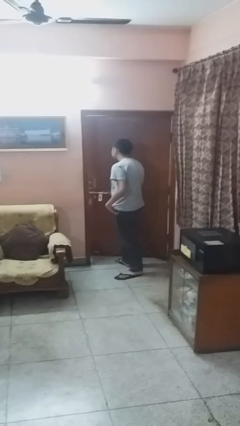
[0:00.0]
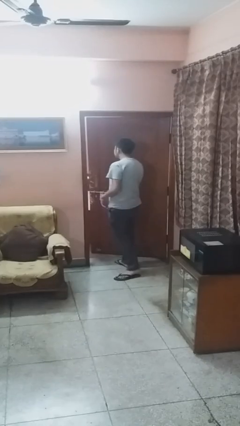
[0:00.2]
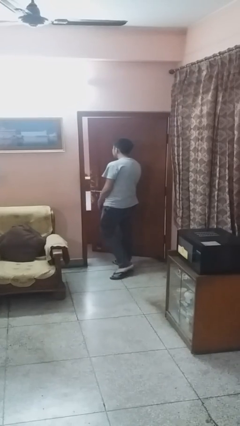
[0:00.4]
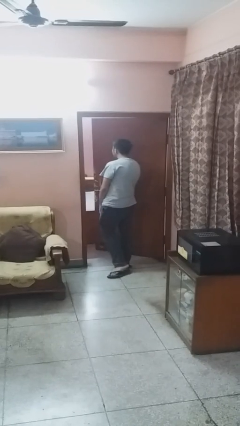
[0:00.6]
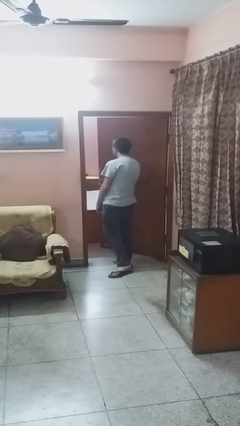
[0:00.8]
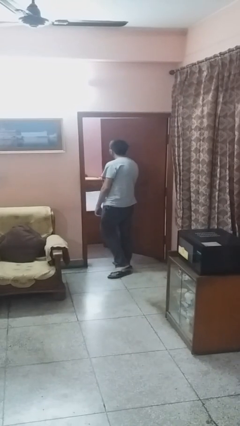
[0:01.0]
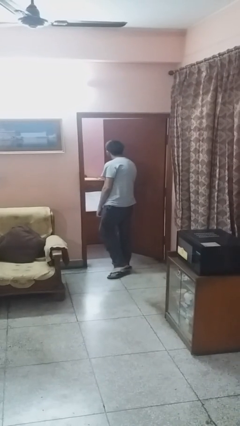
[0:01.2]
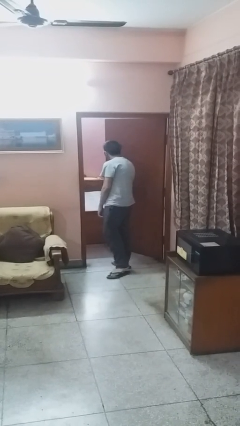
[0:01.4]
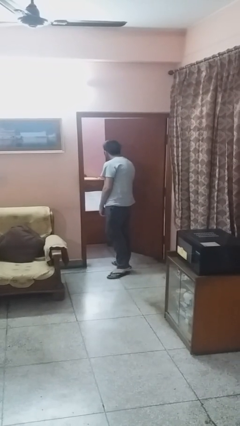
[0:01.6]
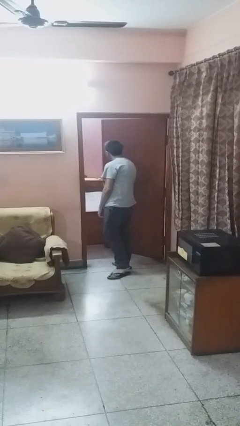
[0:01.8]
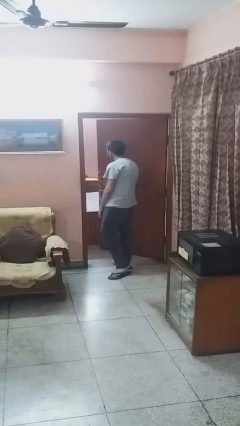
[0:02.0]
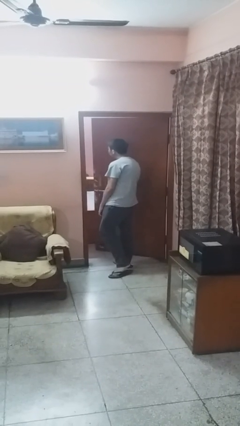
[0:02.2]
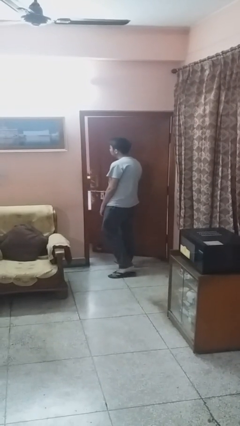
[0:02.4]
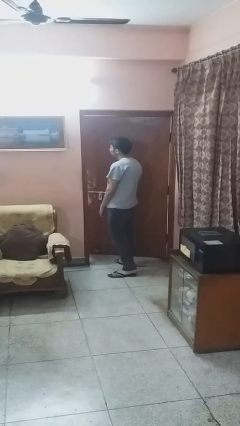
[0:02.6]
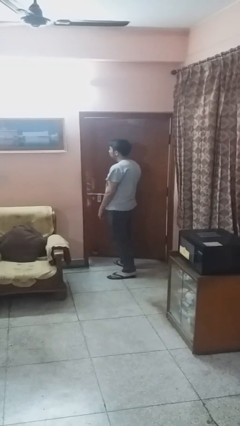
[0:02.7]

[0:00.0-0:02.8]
person opens facility door

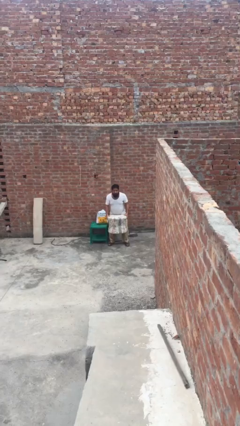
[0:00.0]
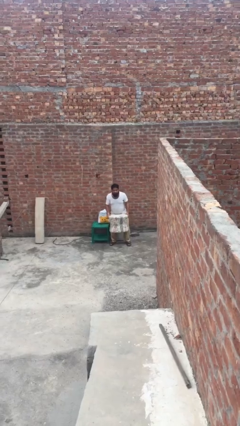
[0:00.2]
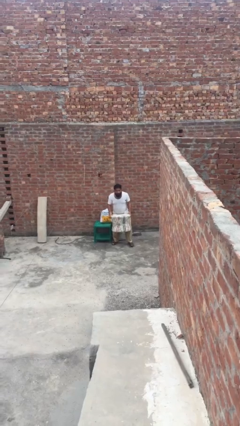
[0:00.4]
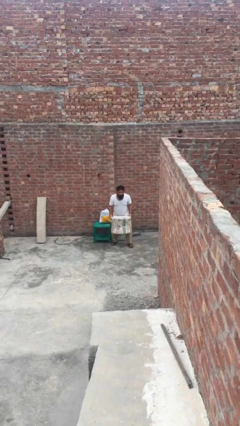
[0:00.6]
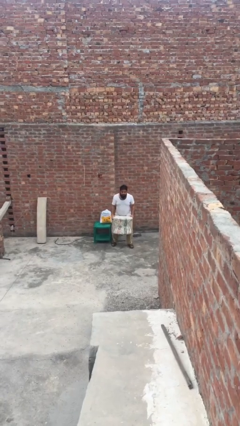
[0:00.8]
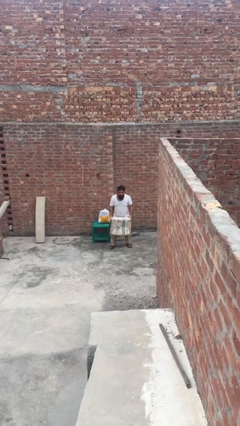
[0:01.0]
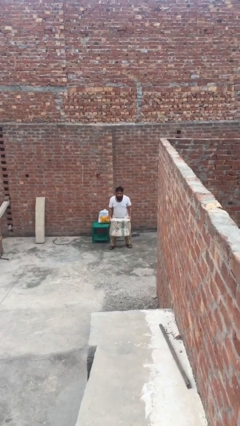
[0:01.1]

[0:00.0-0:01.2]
person picks up object from floor

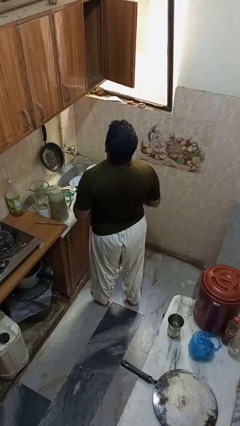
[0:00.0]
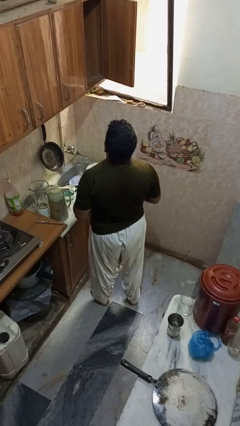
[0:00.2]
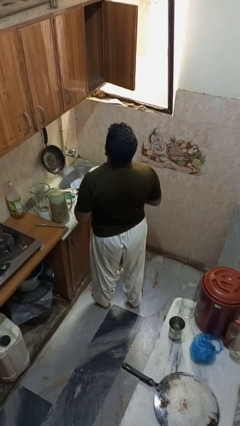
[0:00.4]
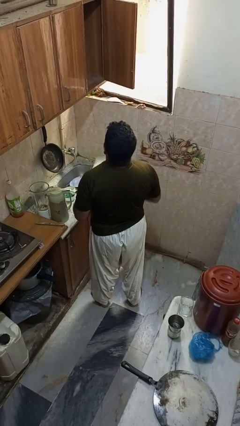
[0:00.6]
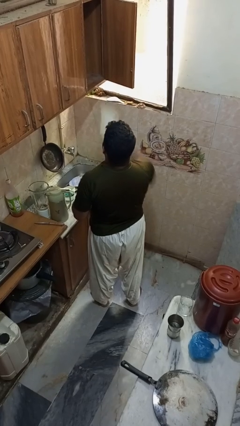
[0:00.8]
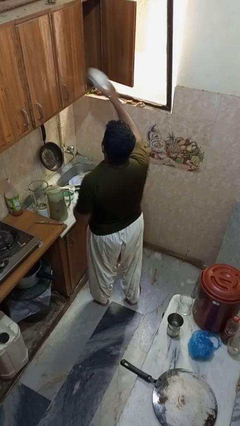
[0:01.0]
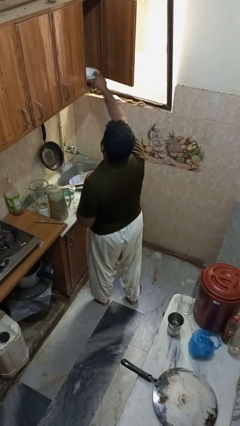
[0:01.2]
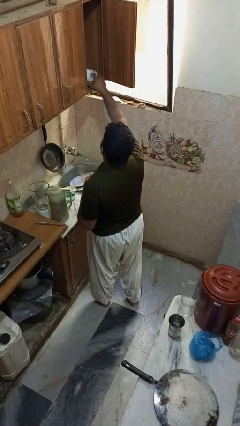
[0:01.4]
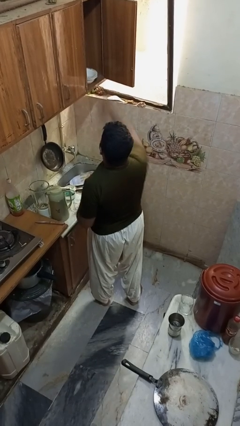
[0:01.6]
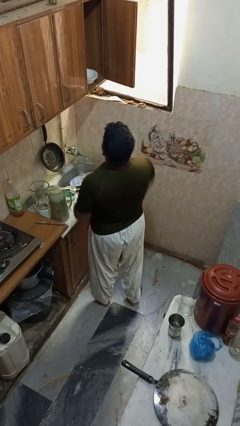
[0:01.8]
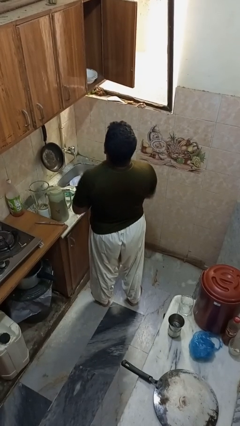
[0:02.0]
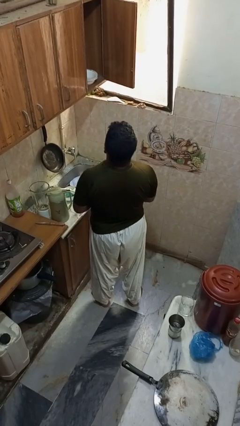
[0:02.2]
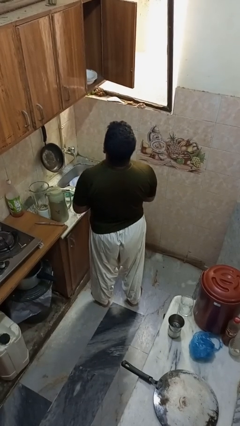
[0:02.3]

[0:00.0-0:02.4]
person puts object in cabinet

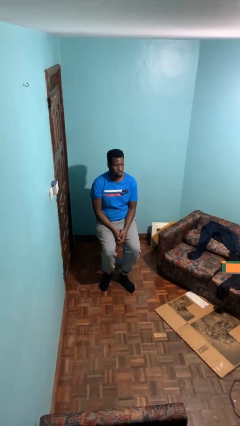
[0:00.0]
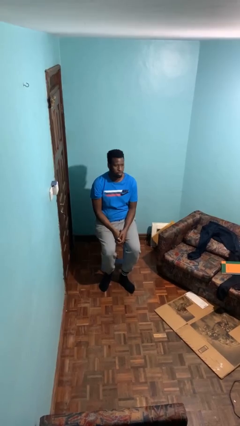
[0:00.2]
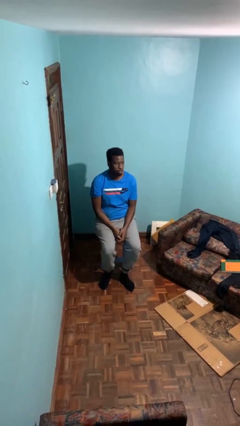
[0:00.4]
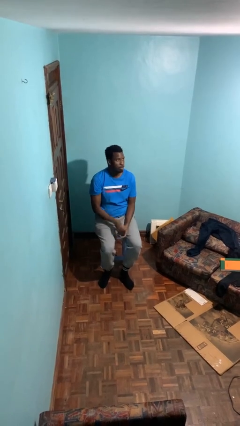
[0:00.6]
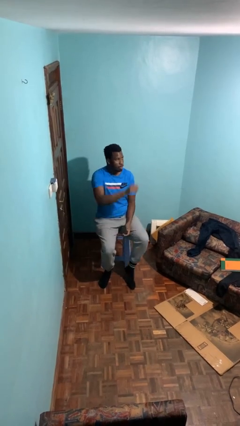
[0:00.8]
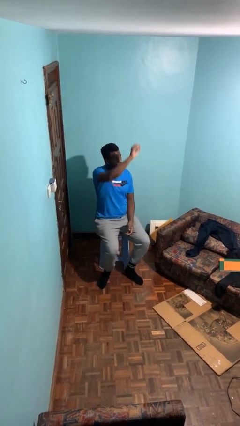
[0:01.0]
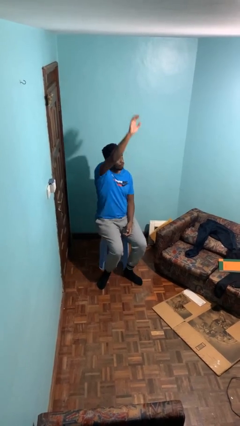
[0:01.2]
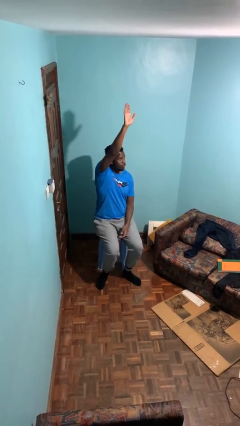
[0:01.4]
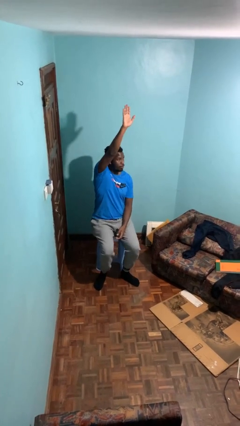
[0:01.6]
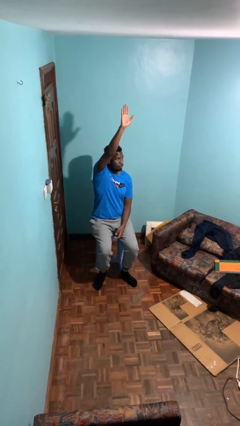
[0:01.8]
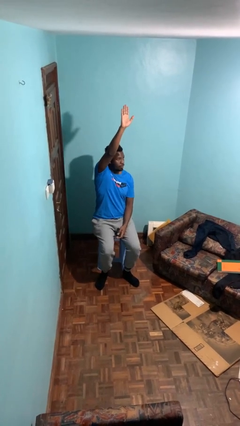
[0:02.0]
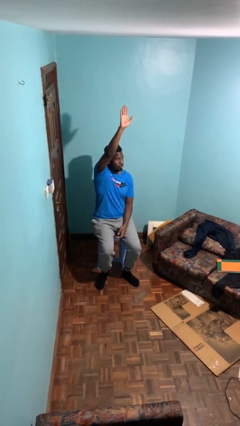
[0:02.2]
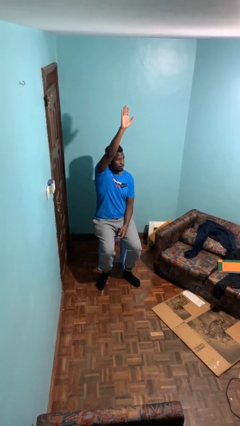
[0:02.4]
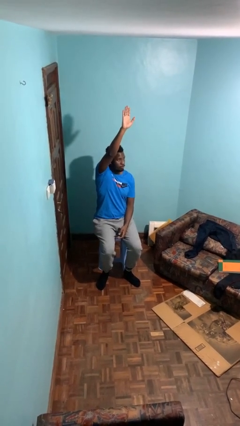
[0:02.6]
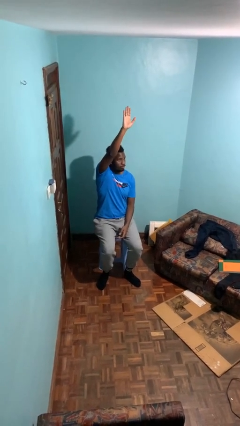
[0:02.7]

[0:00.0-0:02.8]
person gestures raise hand

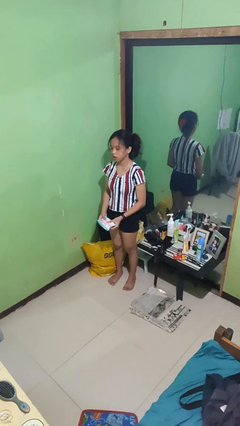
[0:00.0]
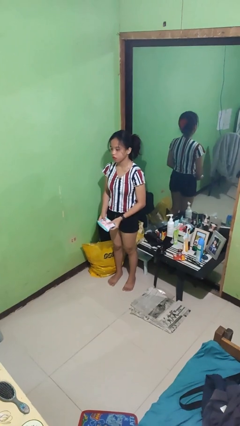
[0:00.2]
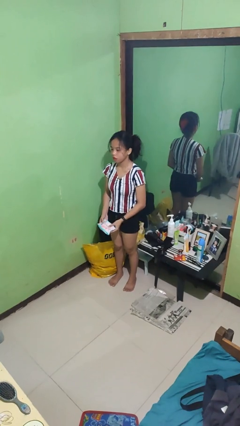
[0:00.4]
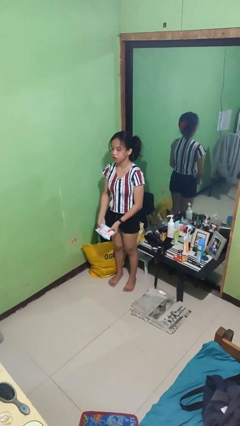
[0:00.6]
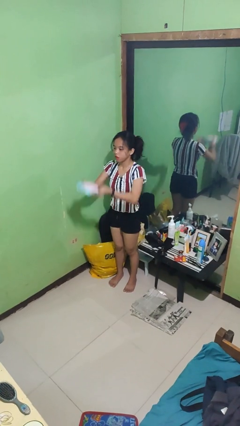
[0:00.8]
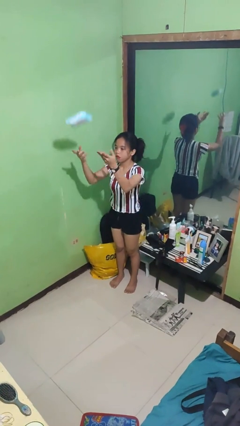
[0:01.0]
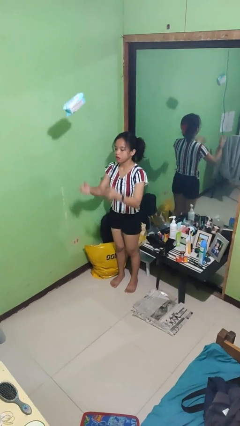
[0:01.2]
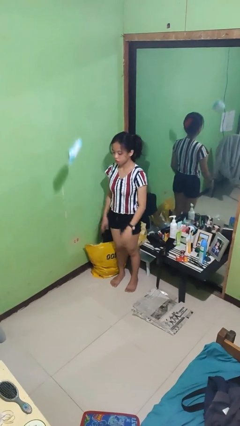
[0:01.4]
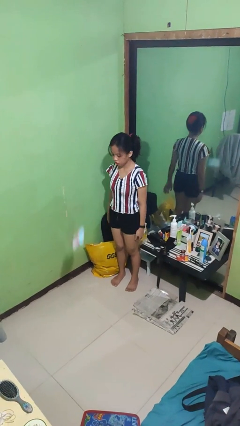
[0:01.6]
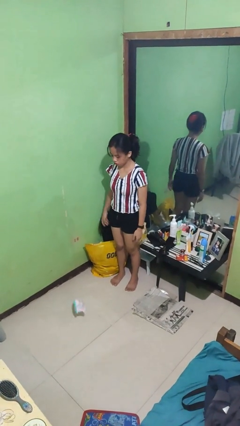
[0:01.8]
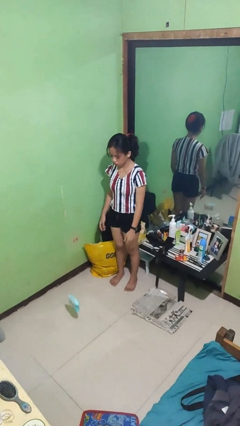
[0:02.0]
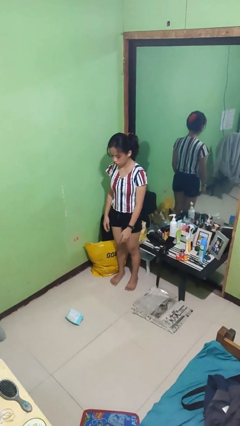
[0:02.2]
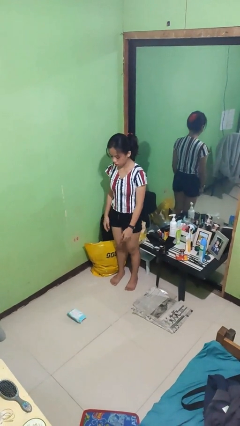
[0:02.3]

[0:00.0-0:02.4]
person throws object into air

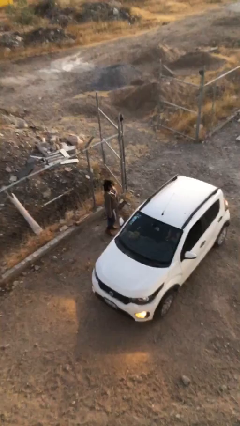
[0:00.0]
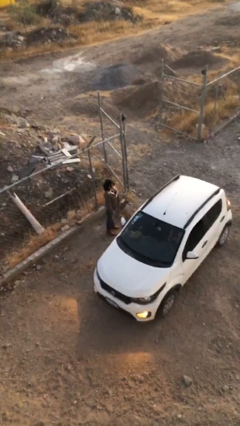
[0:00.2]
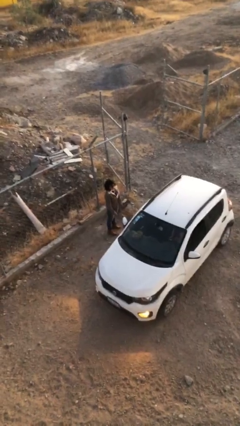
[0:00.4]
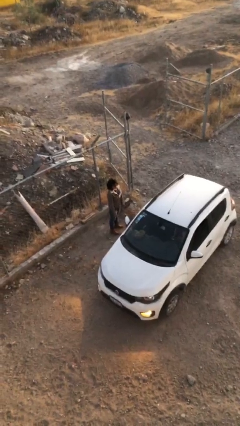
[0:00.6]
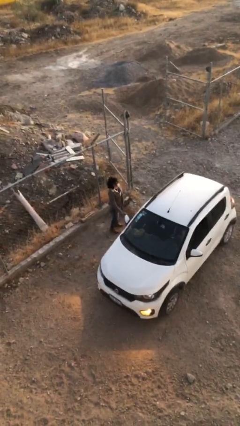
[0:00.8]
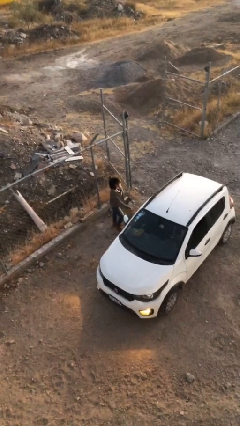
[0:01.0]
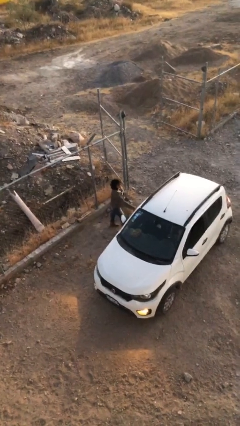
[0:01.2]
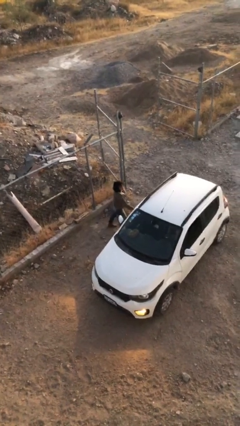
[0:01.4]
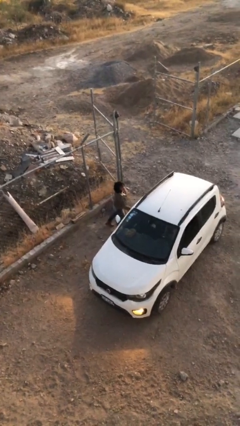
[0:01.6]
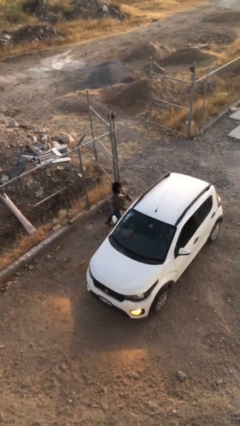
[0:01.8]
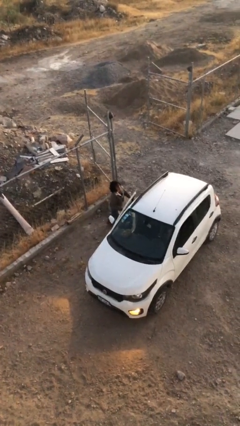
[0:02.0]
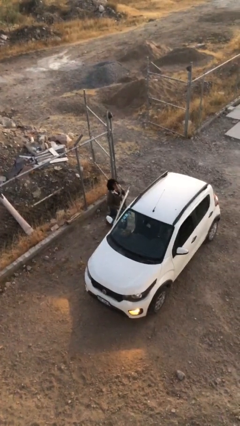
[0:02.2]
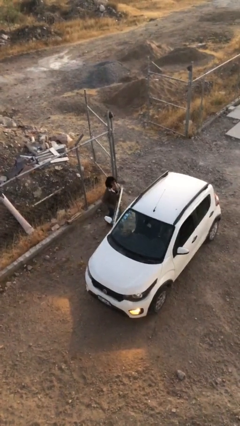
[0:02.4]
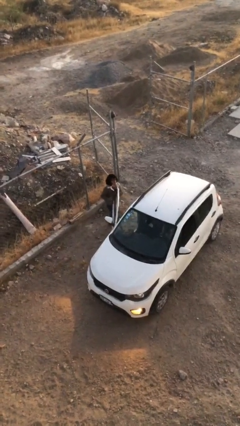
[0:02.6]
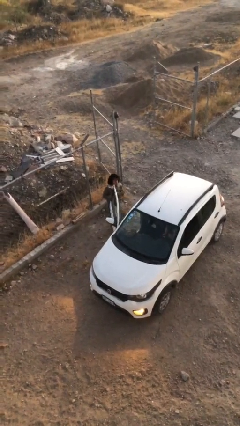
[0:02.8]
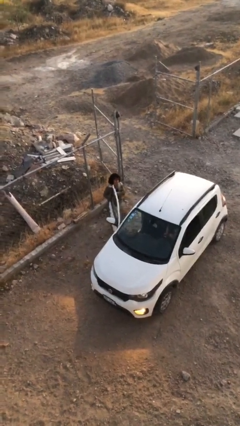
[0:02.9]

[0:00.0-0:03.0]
person opens car door

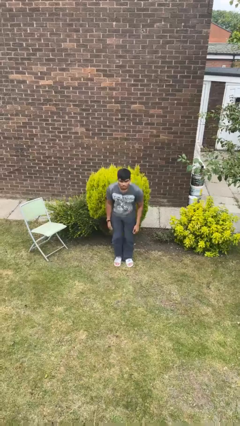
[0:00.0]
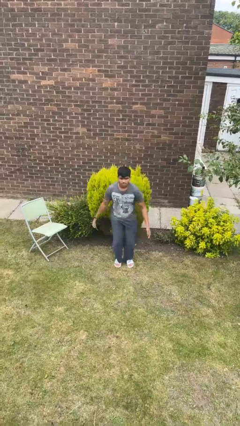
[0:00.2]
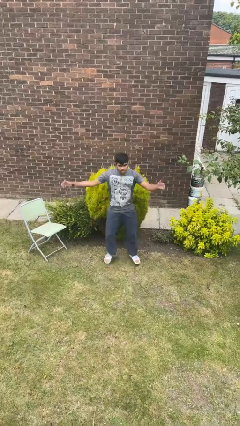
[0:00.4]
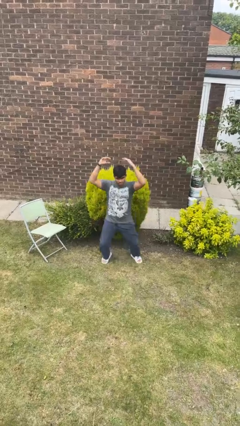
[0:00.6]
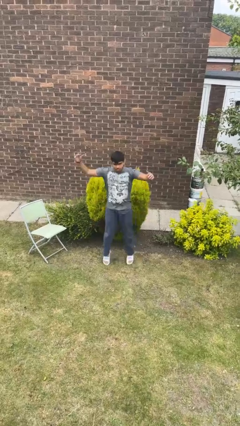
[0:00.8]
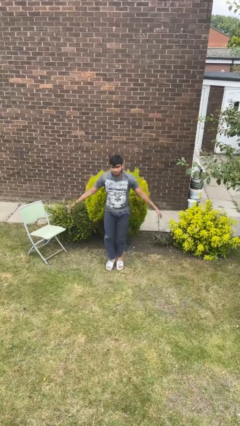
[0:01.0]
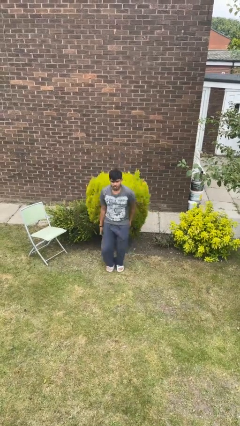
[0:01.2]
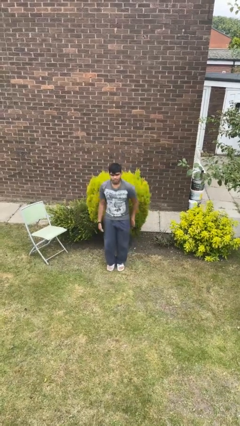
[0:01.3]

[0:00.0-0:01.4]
person exercises with jumping jacks

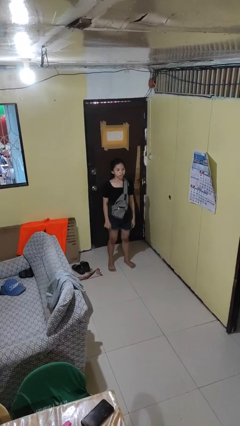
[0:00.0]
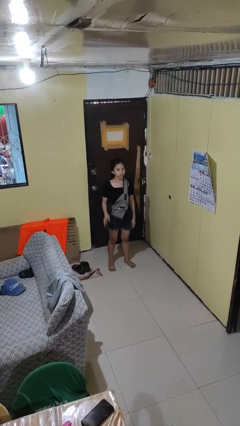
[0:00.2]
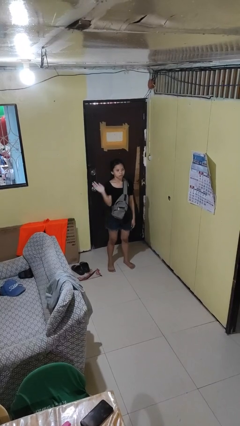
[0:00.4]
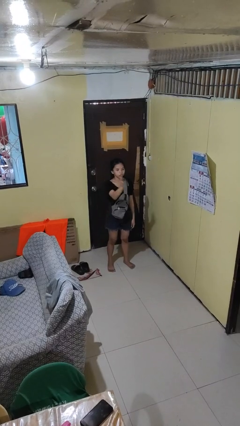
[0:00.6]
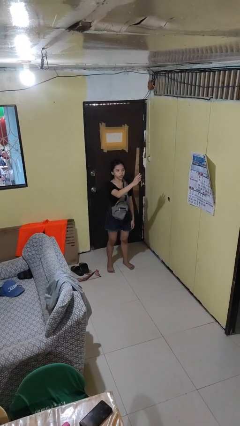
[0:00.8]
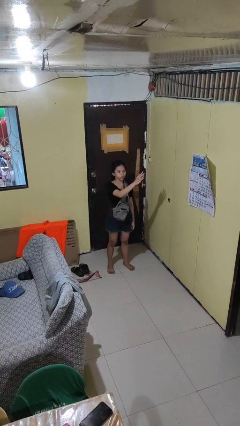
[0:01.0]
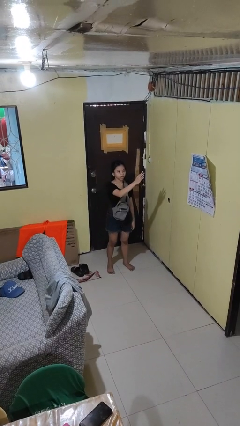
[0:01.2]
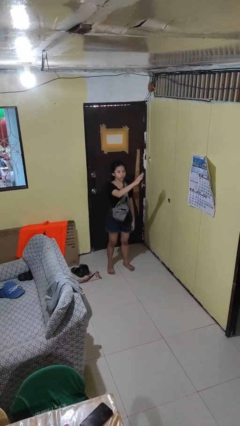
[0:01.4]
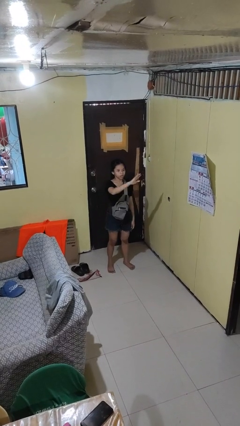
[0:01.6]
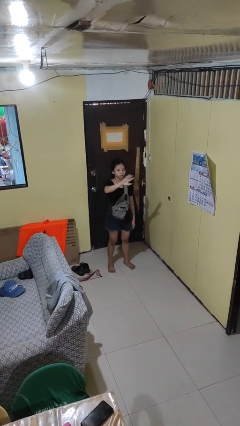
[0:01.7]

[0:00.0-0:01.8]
person gestures swipe left
